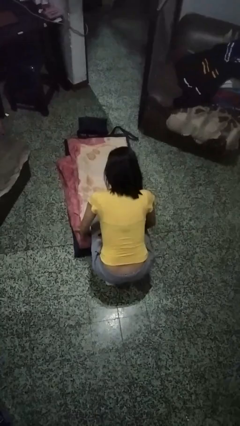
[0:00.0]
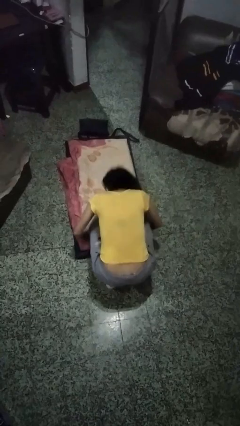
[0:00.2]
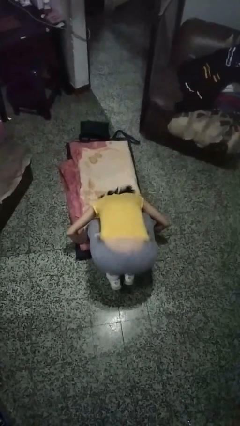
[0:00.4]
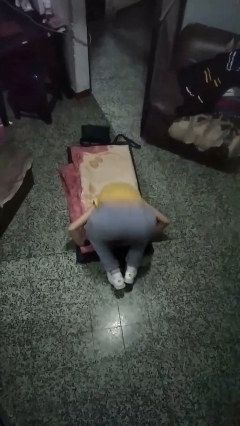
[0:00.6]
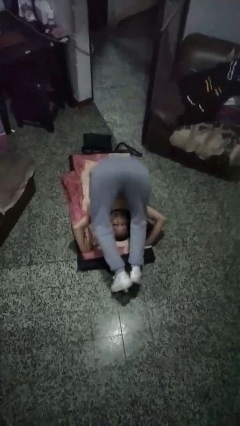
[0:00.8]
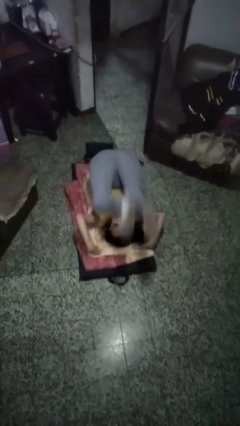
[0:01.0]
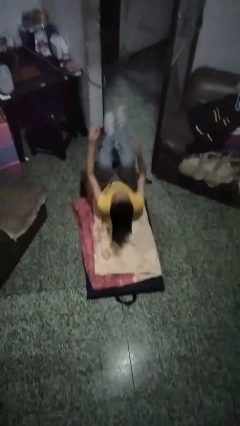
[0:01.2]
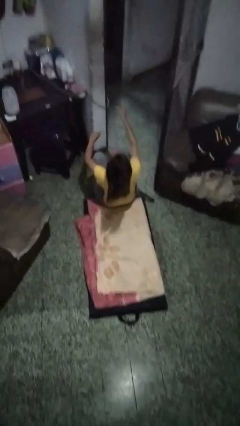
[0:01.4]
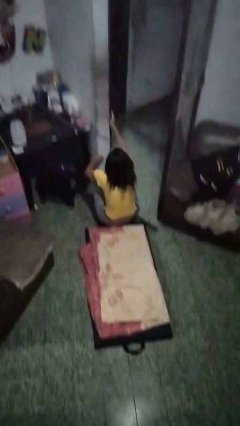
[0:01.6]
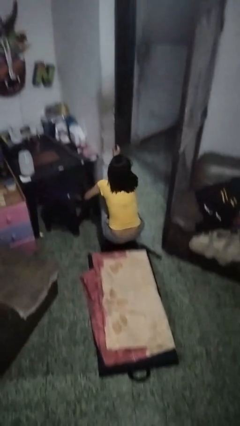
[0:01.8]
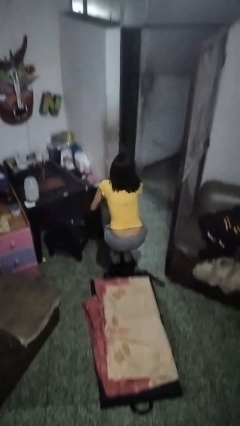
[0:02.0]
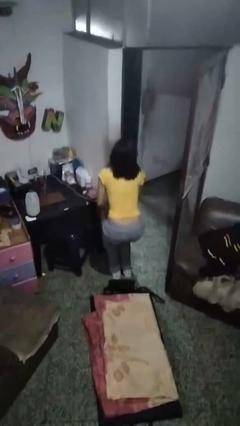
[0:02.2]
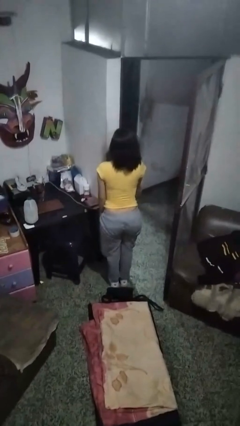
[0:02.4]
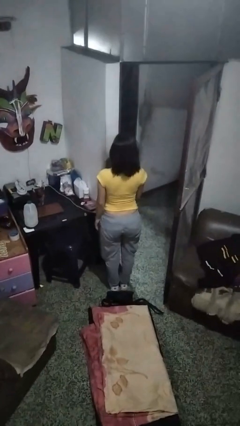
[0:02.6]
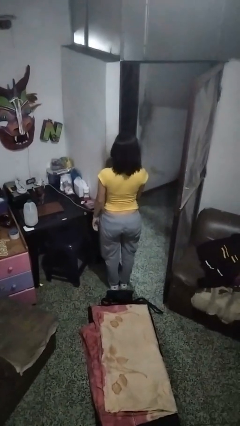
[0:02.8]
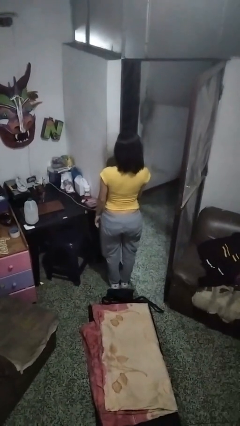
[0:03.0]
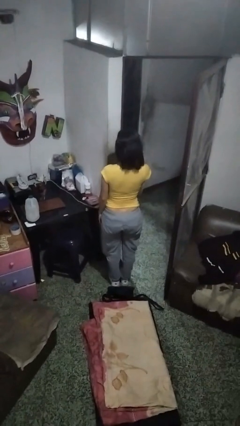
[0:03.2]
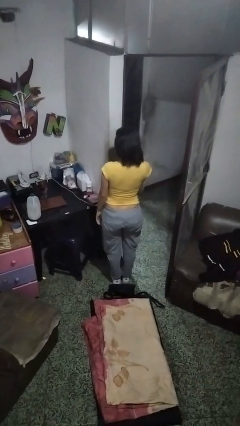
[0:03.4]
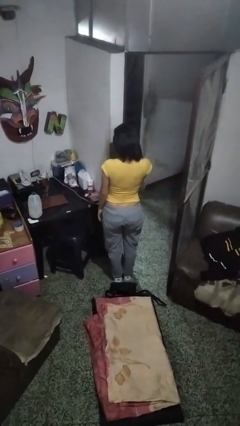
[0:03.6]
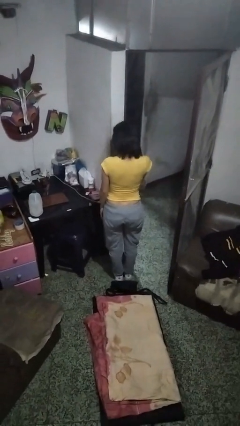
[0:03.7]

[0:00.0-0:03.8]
person somersaults

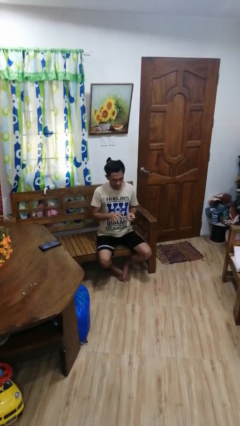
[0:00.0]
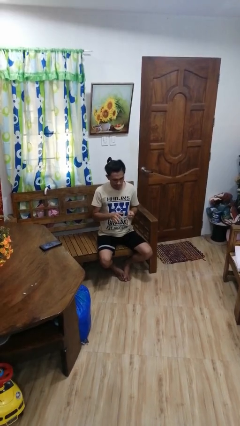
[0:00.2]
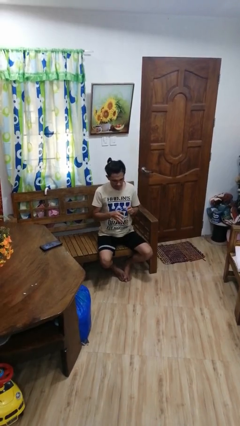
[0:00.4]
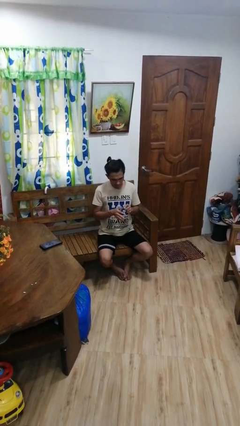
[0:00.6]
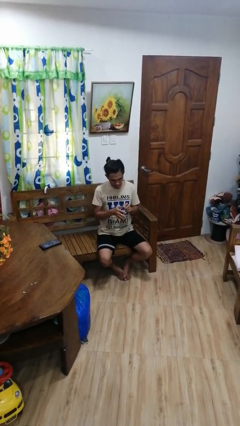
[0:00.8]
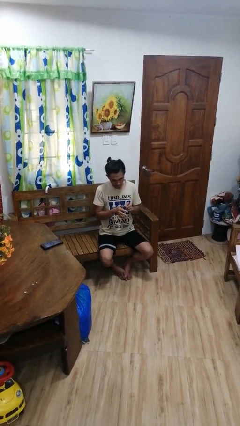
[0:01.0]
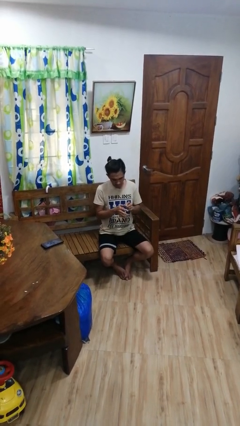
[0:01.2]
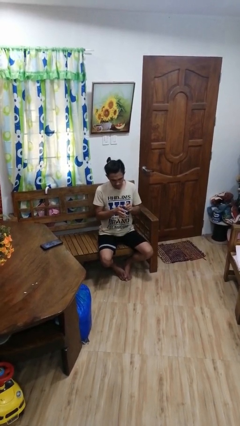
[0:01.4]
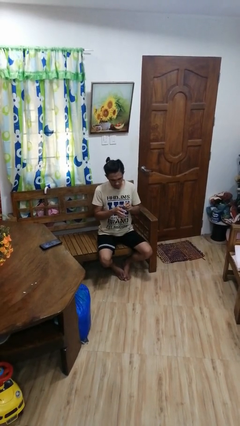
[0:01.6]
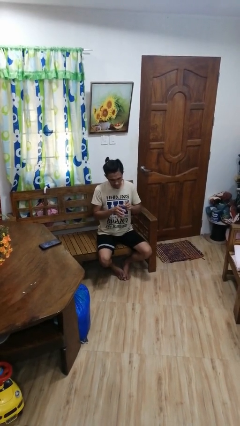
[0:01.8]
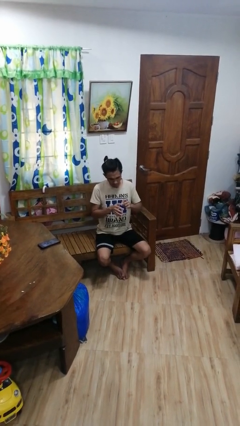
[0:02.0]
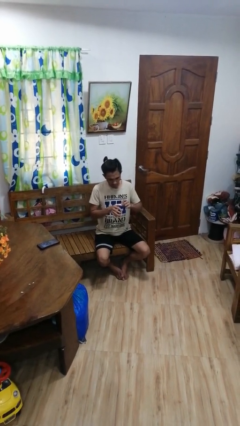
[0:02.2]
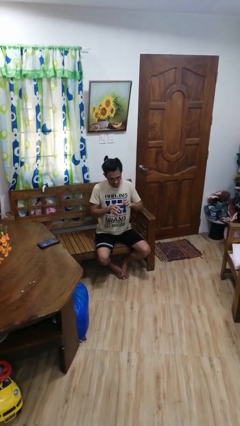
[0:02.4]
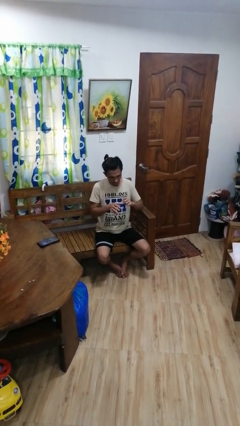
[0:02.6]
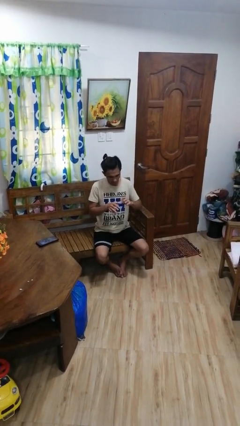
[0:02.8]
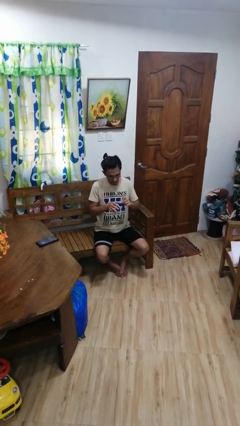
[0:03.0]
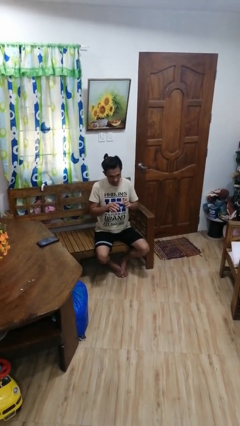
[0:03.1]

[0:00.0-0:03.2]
person files fingernails

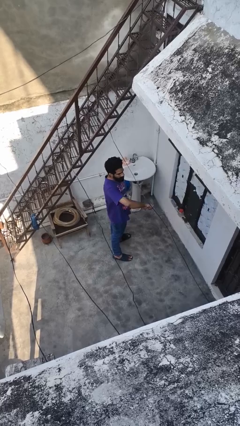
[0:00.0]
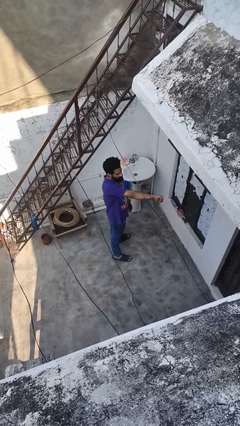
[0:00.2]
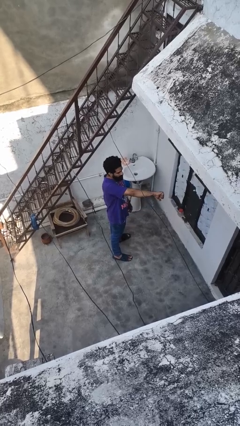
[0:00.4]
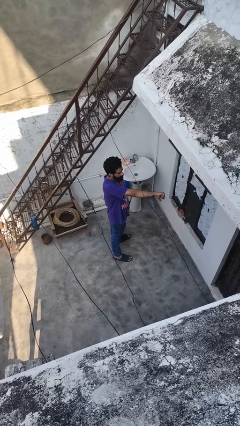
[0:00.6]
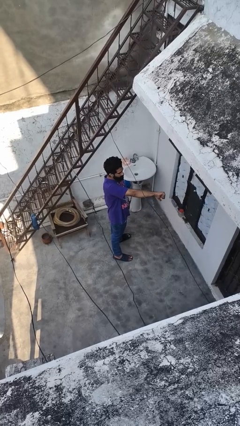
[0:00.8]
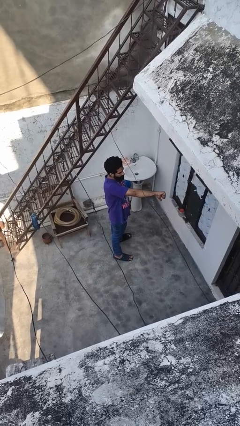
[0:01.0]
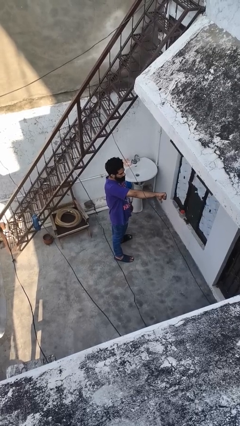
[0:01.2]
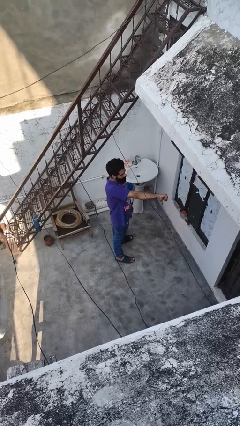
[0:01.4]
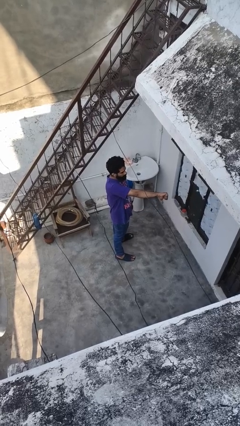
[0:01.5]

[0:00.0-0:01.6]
person gestures thumbs down

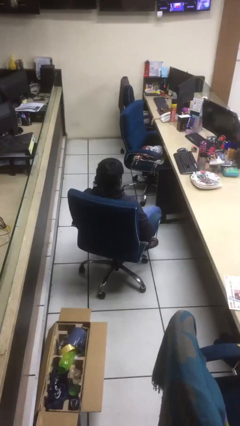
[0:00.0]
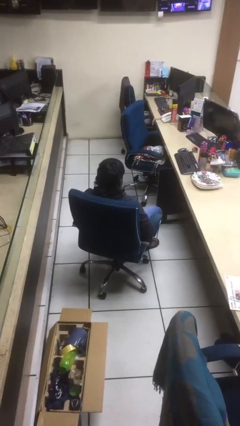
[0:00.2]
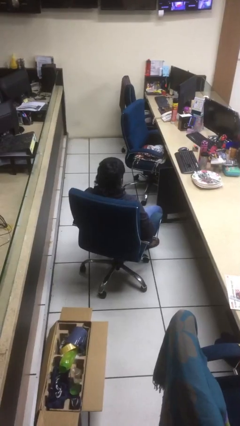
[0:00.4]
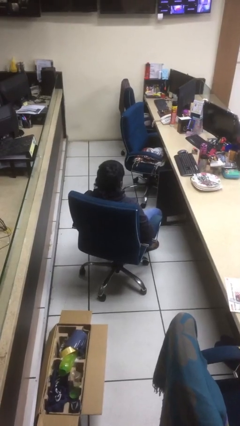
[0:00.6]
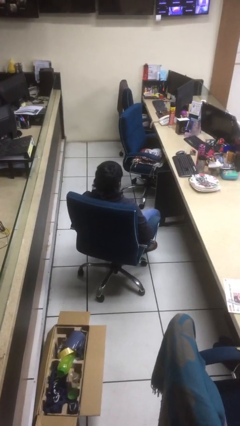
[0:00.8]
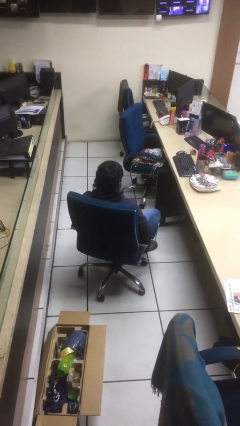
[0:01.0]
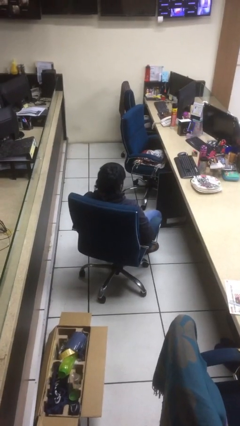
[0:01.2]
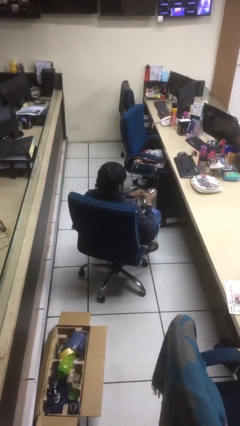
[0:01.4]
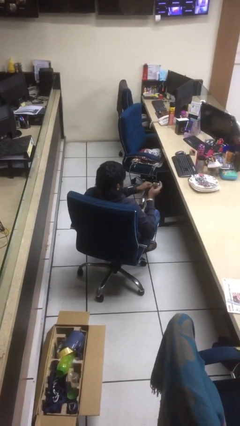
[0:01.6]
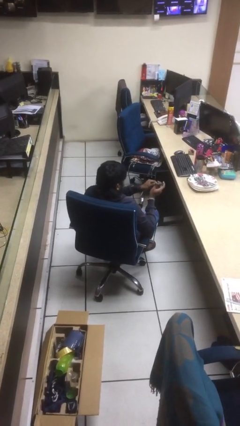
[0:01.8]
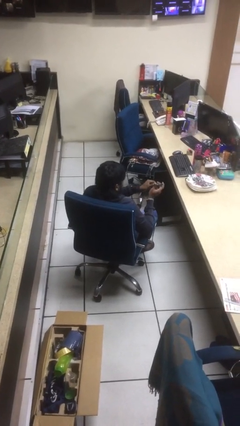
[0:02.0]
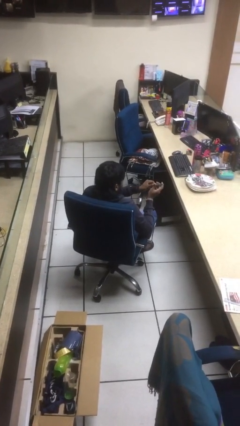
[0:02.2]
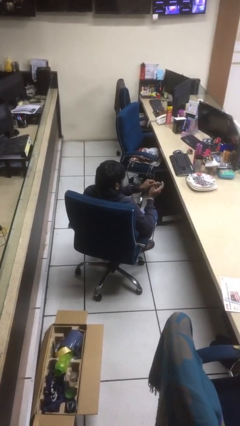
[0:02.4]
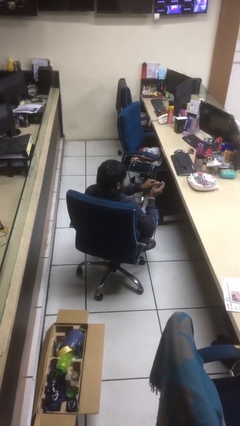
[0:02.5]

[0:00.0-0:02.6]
person clips fingernails

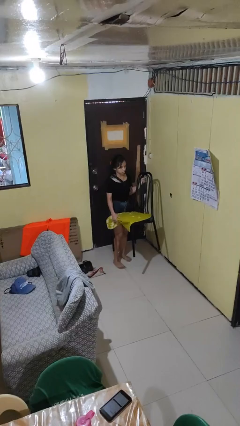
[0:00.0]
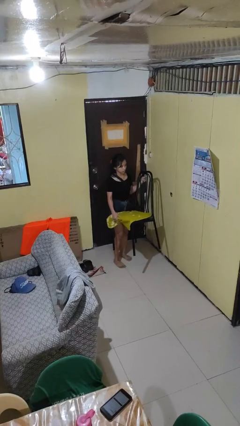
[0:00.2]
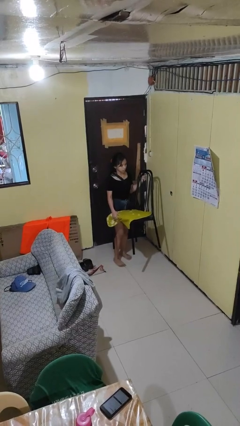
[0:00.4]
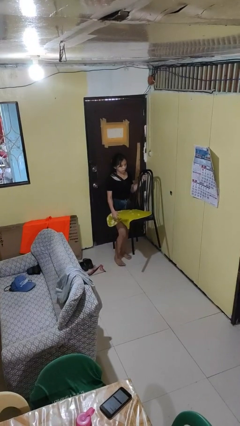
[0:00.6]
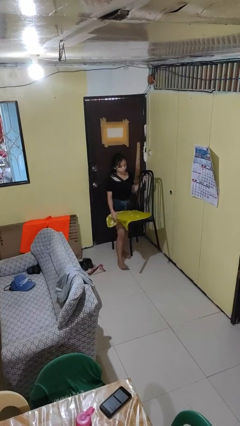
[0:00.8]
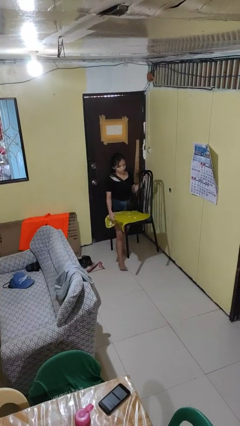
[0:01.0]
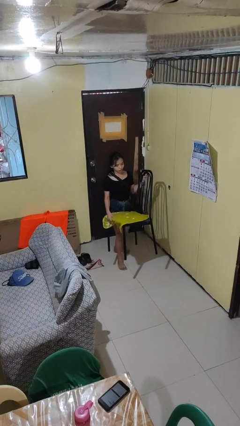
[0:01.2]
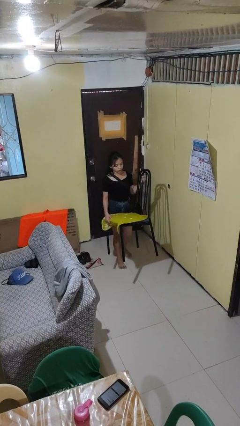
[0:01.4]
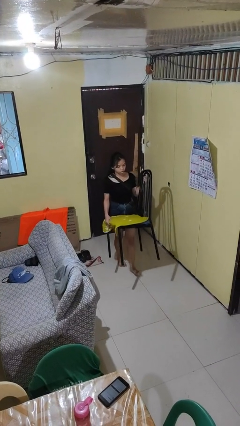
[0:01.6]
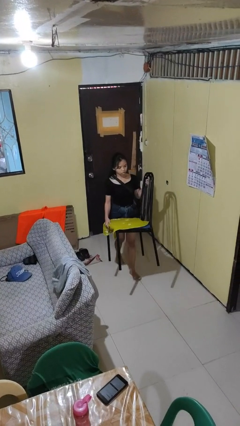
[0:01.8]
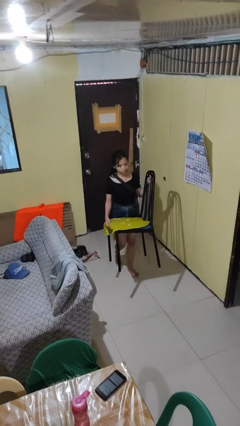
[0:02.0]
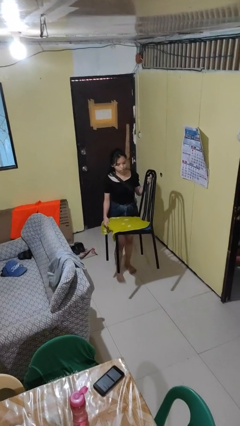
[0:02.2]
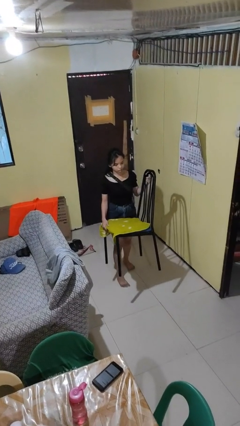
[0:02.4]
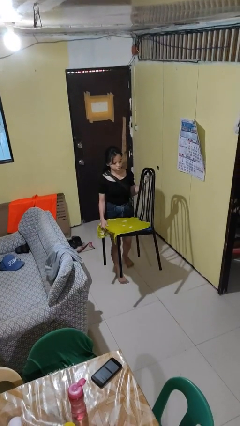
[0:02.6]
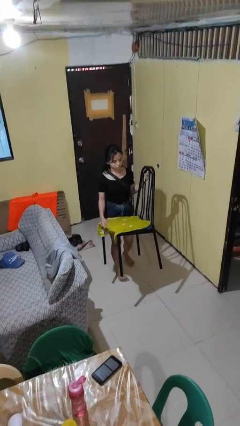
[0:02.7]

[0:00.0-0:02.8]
person carries furniture

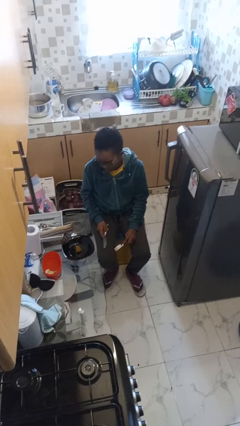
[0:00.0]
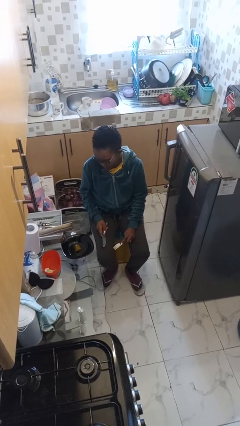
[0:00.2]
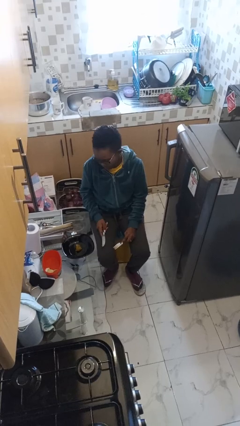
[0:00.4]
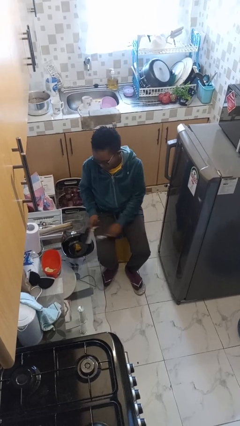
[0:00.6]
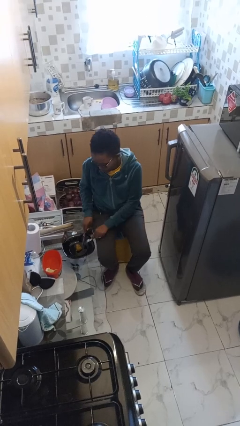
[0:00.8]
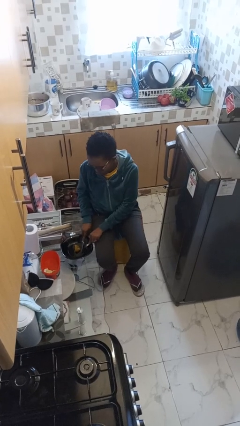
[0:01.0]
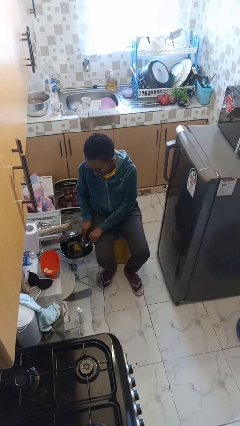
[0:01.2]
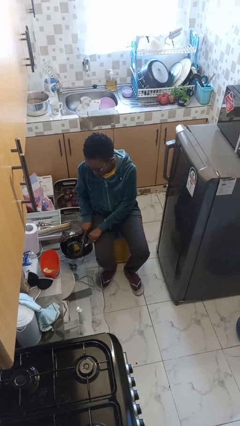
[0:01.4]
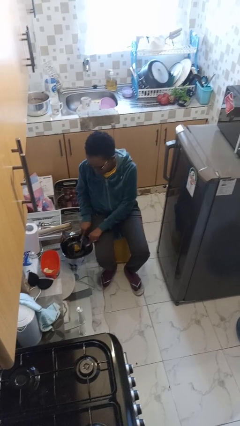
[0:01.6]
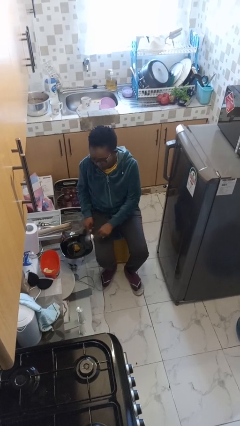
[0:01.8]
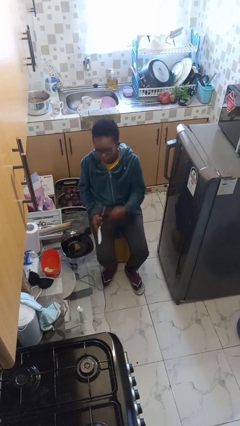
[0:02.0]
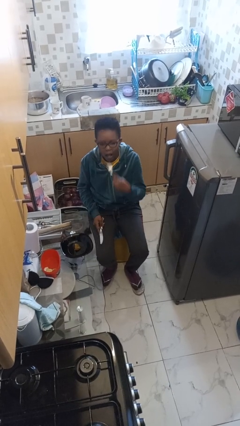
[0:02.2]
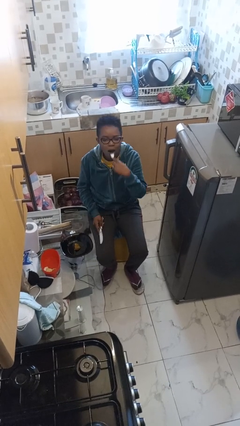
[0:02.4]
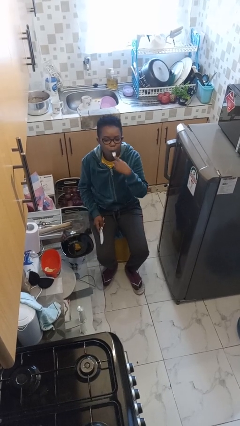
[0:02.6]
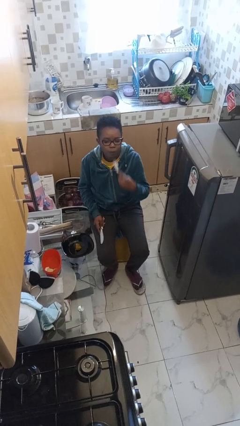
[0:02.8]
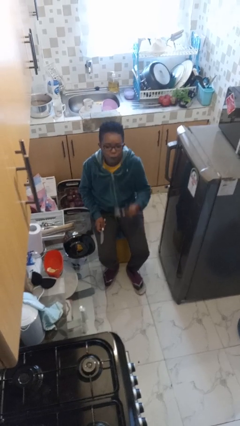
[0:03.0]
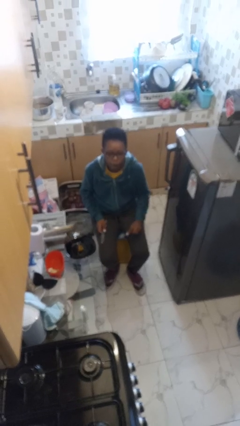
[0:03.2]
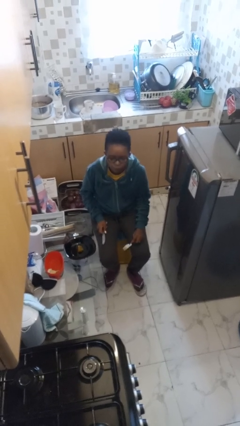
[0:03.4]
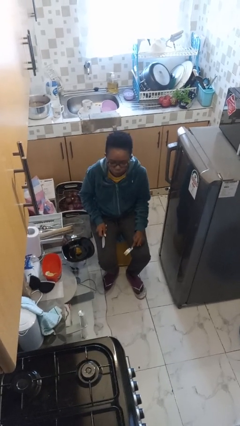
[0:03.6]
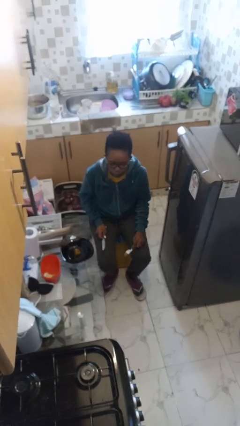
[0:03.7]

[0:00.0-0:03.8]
person eats with utensil
